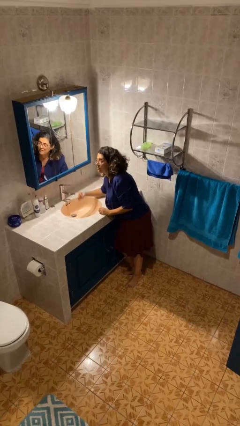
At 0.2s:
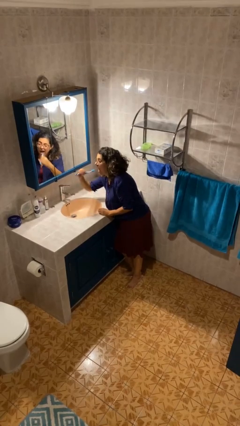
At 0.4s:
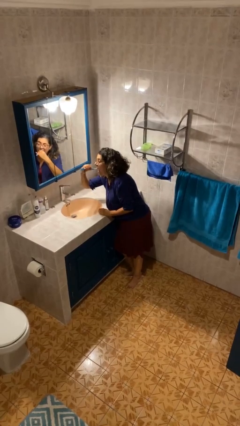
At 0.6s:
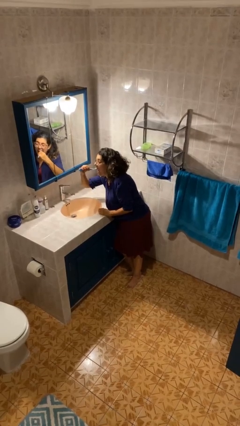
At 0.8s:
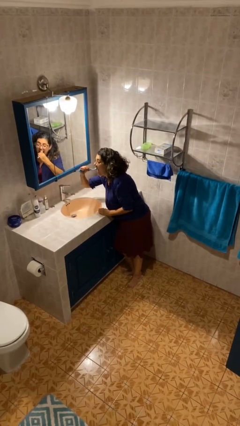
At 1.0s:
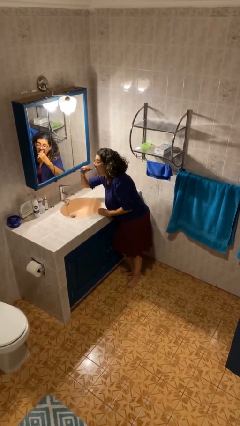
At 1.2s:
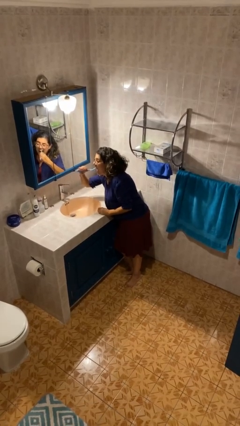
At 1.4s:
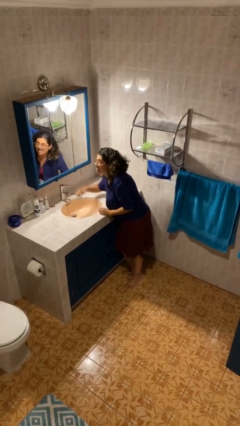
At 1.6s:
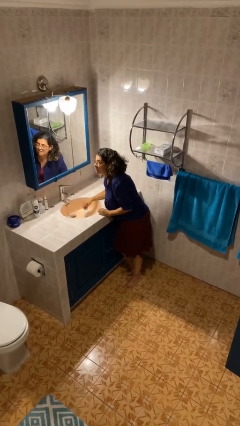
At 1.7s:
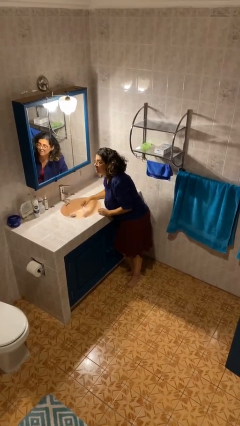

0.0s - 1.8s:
person brushes teeth

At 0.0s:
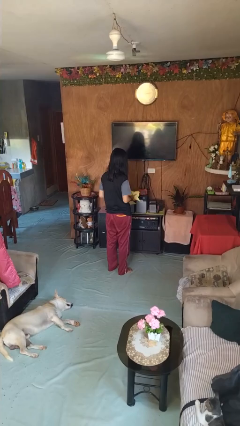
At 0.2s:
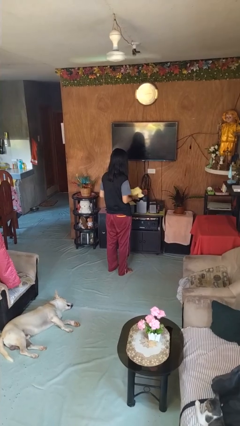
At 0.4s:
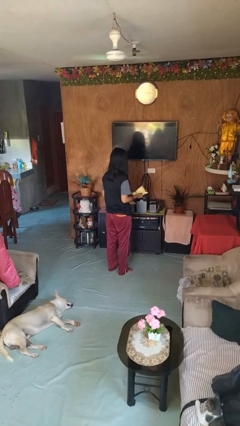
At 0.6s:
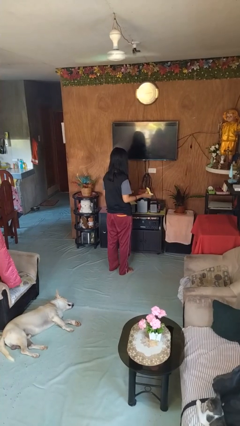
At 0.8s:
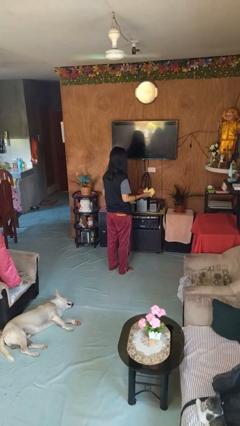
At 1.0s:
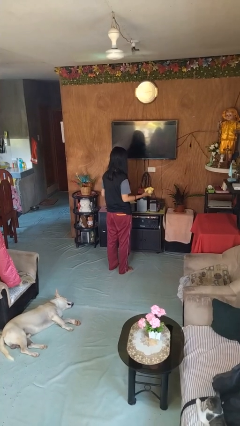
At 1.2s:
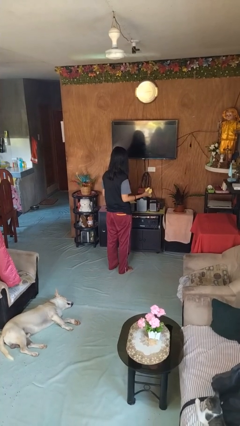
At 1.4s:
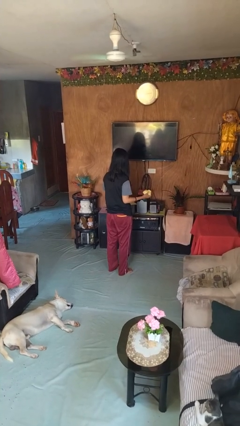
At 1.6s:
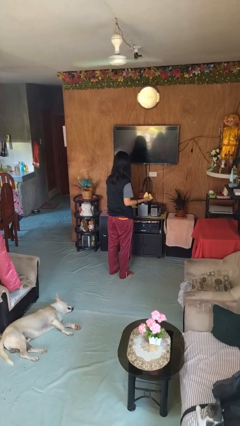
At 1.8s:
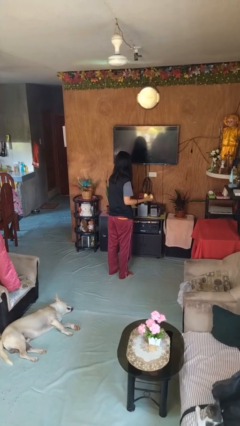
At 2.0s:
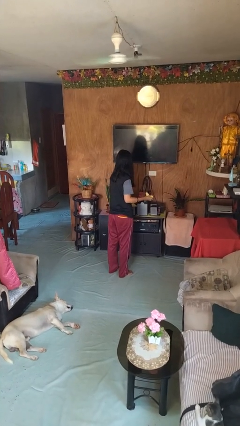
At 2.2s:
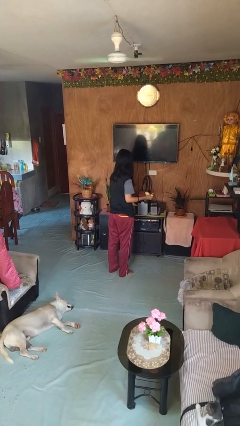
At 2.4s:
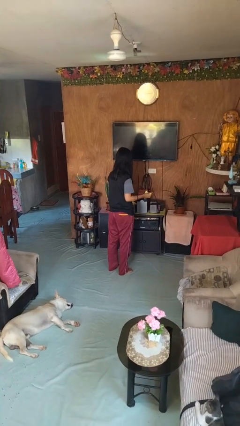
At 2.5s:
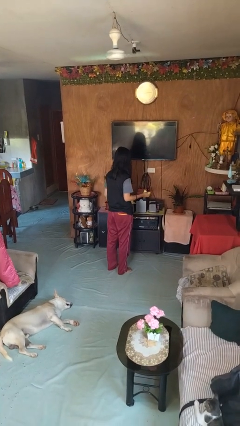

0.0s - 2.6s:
person crumples paper

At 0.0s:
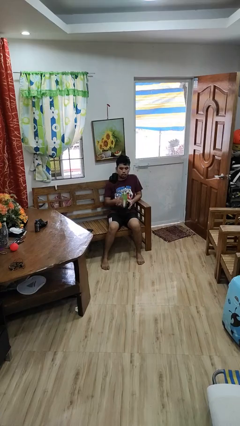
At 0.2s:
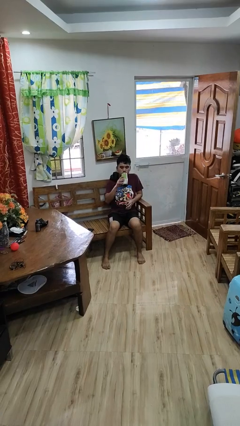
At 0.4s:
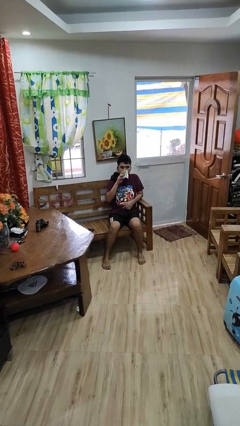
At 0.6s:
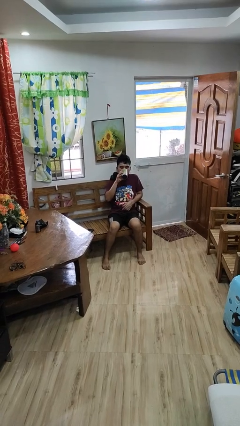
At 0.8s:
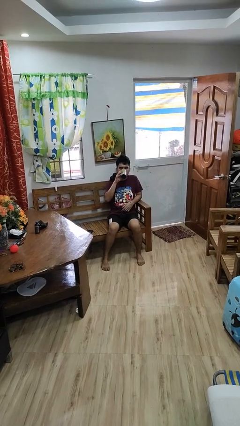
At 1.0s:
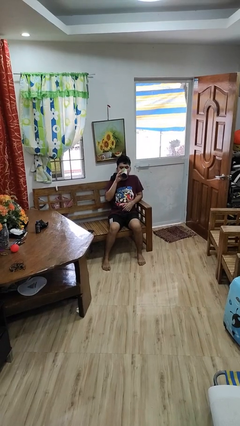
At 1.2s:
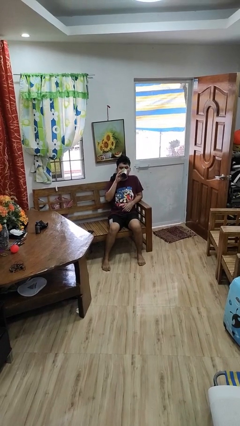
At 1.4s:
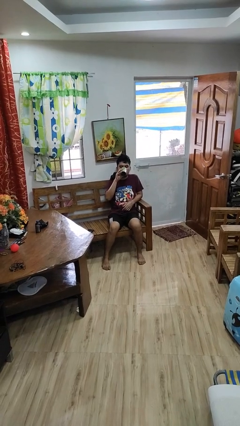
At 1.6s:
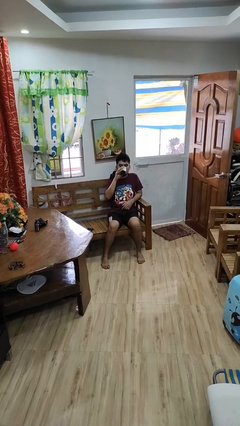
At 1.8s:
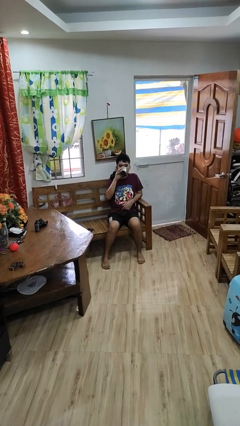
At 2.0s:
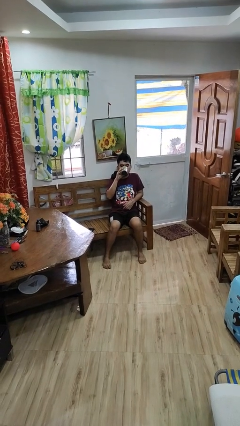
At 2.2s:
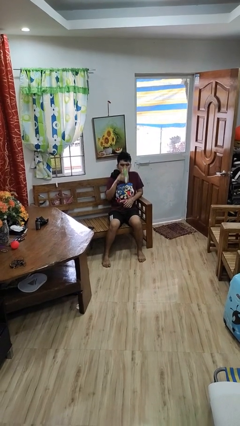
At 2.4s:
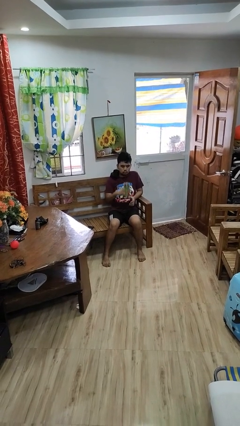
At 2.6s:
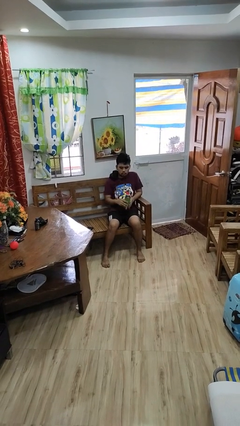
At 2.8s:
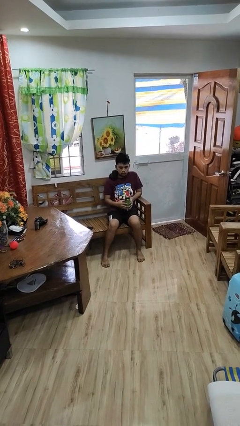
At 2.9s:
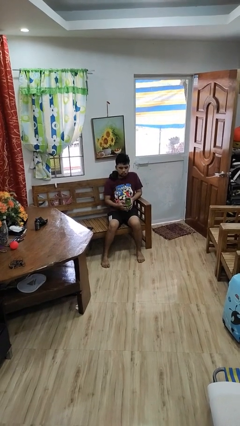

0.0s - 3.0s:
person drinks from bottle

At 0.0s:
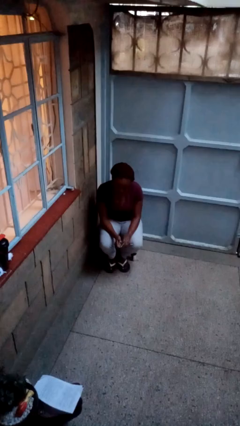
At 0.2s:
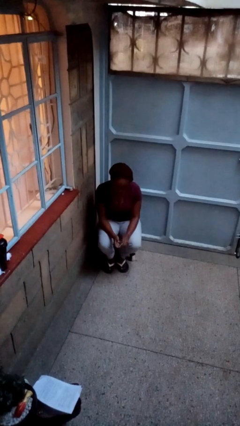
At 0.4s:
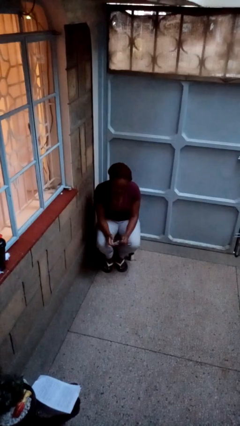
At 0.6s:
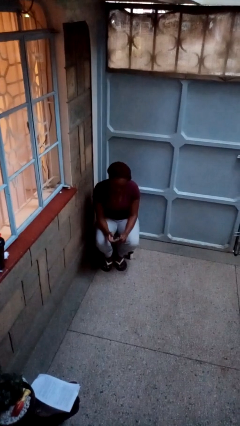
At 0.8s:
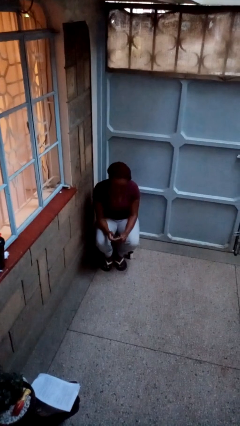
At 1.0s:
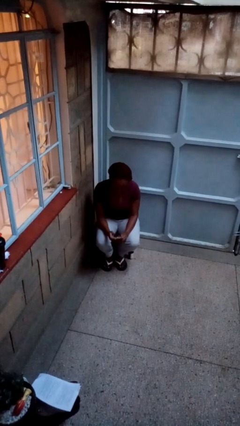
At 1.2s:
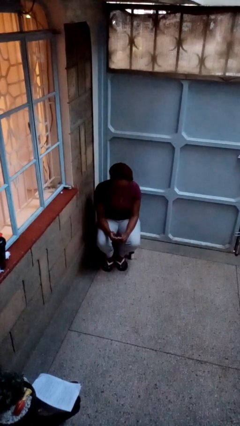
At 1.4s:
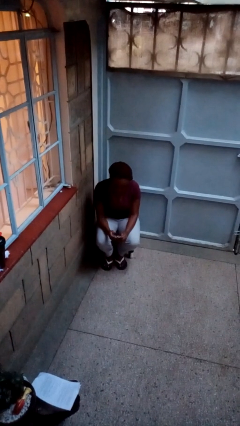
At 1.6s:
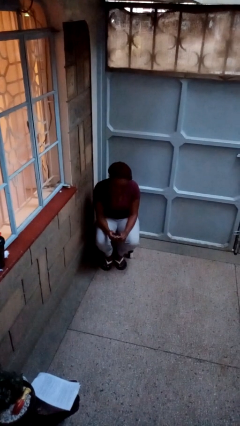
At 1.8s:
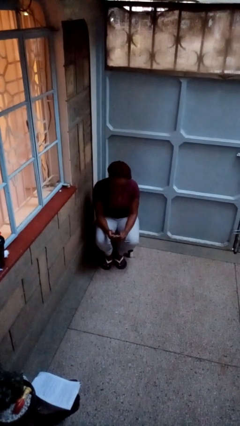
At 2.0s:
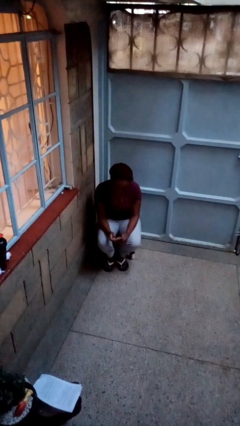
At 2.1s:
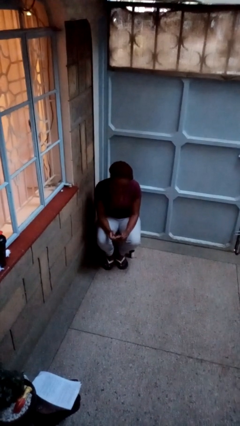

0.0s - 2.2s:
person clips fingernails

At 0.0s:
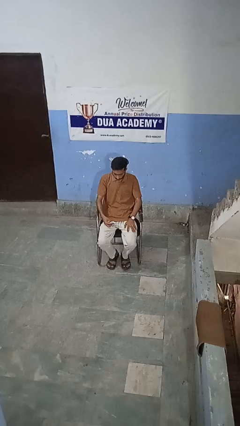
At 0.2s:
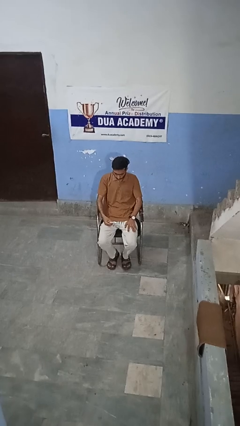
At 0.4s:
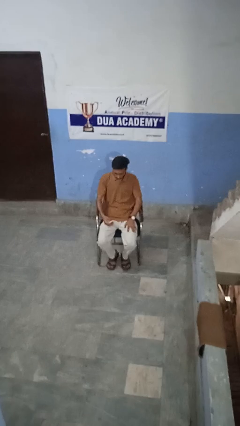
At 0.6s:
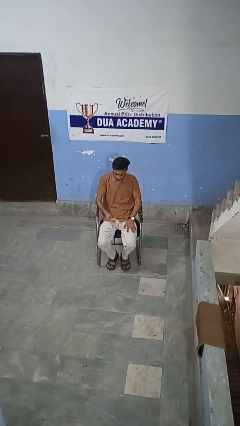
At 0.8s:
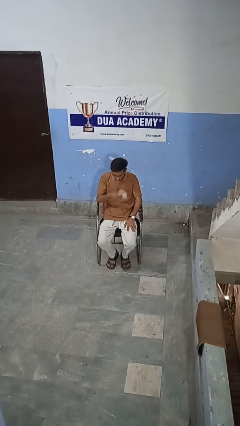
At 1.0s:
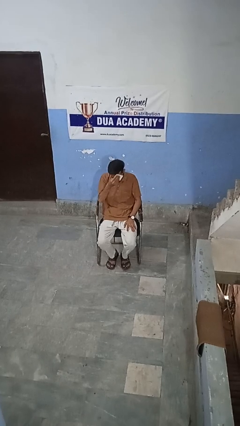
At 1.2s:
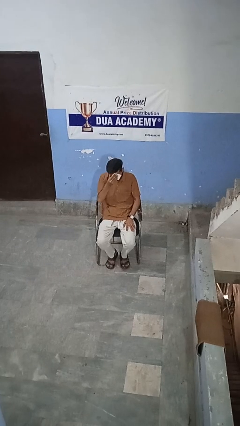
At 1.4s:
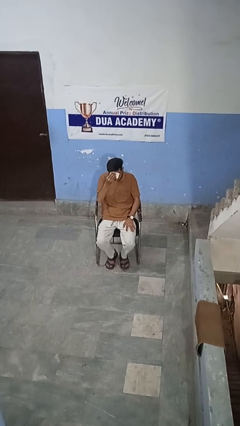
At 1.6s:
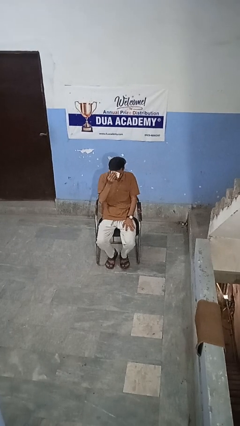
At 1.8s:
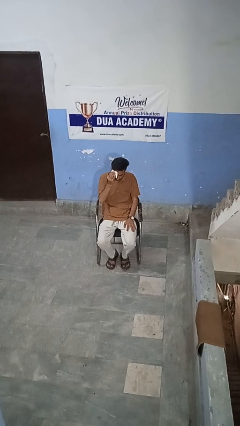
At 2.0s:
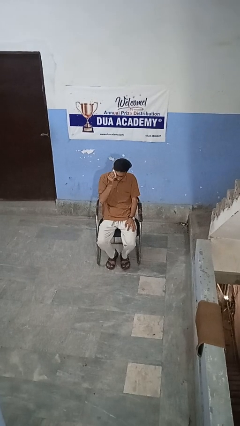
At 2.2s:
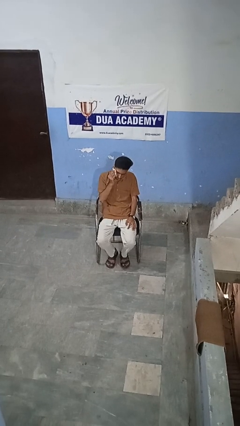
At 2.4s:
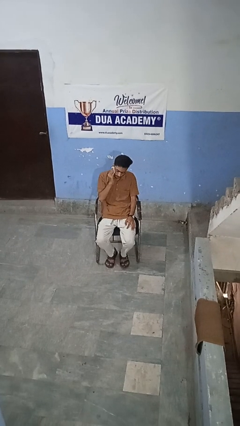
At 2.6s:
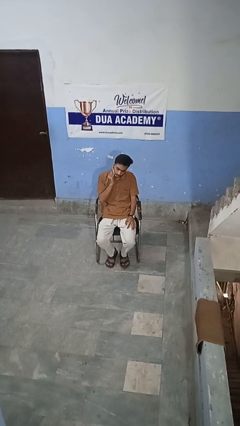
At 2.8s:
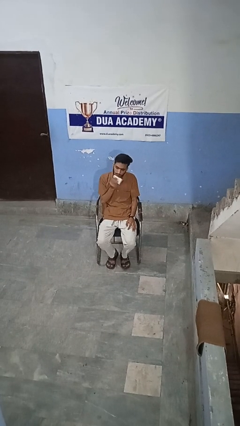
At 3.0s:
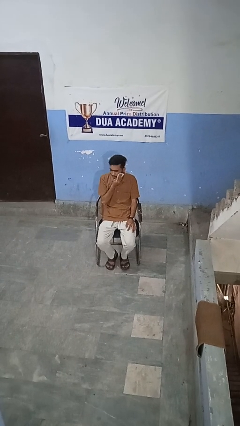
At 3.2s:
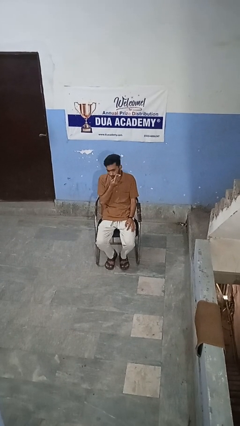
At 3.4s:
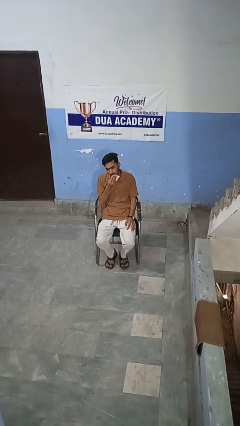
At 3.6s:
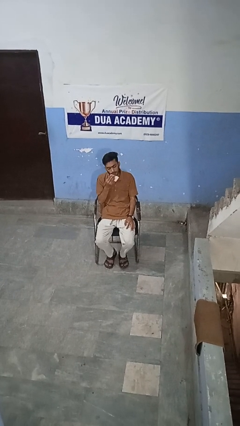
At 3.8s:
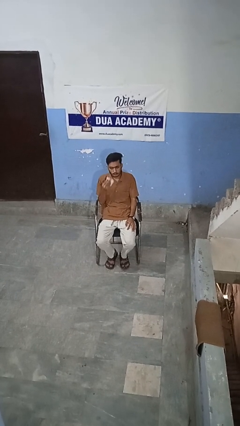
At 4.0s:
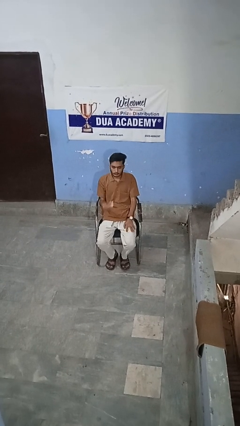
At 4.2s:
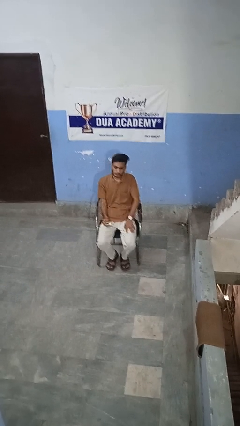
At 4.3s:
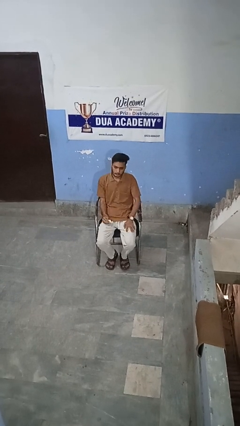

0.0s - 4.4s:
person wipes mouth with napkin

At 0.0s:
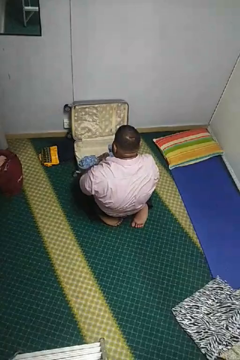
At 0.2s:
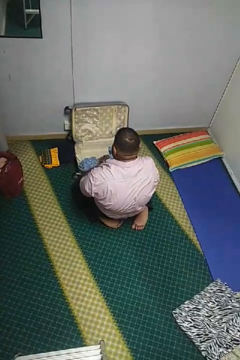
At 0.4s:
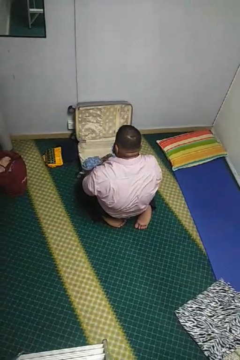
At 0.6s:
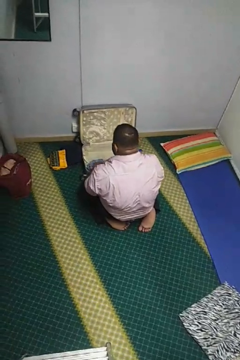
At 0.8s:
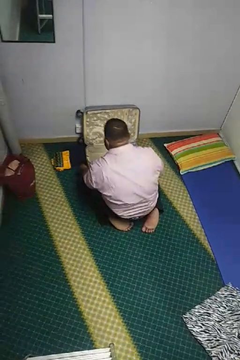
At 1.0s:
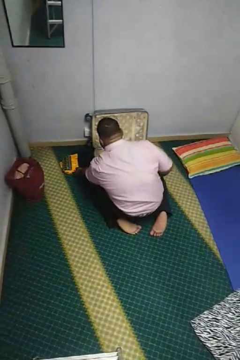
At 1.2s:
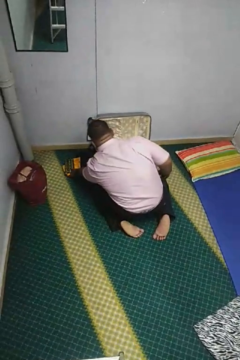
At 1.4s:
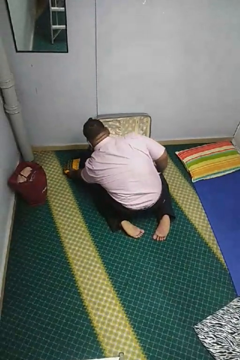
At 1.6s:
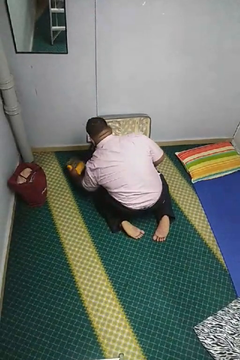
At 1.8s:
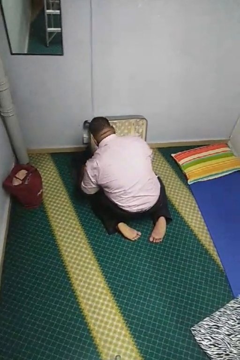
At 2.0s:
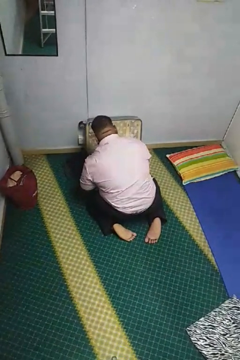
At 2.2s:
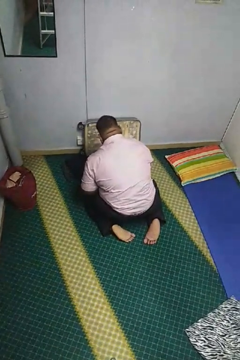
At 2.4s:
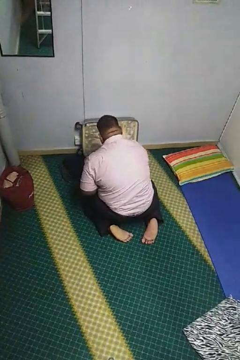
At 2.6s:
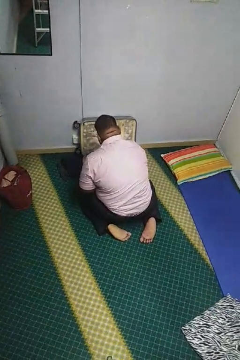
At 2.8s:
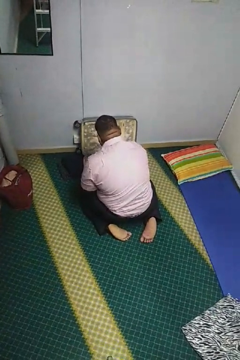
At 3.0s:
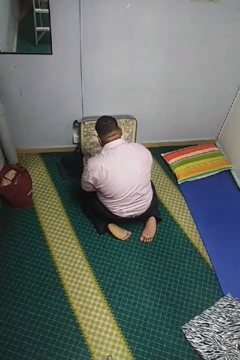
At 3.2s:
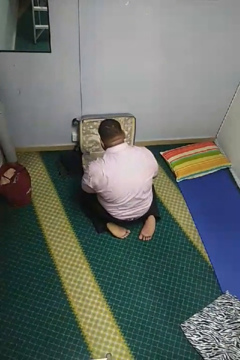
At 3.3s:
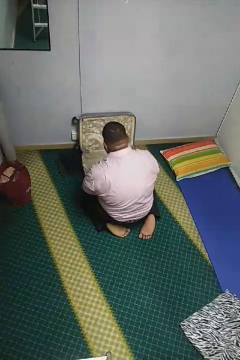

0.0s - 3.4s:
person loads clothes into suitcase

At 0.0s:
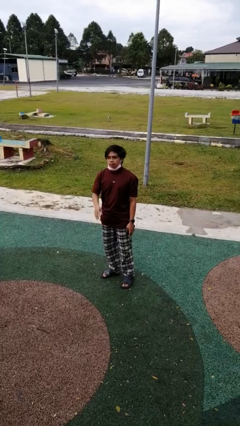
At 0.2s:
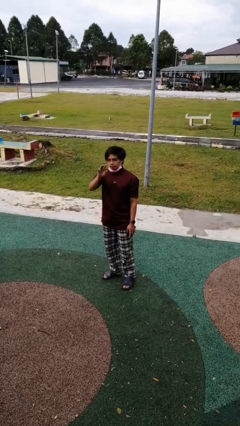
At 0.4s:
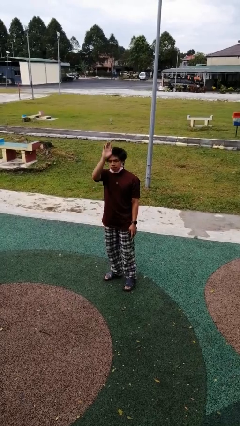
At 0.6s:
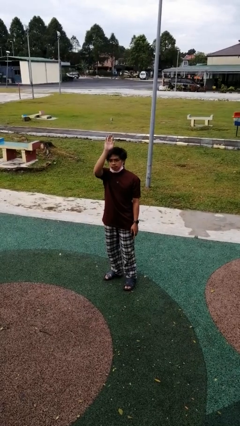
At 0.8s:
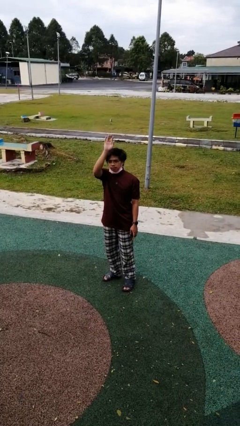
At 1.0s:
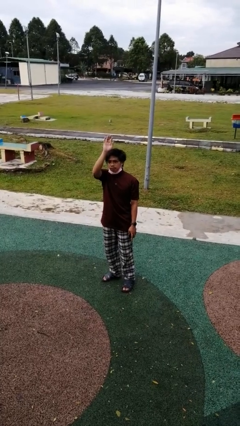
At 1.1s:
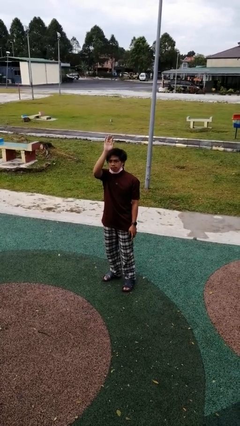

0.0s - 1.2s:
person gestures raise hand
